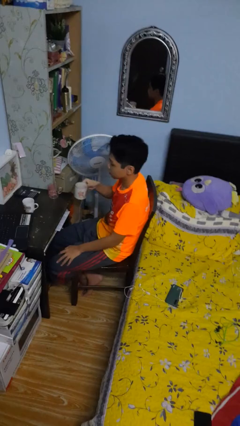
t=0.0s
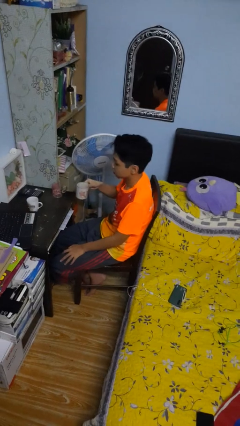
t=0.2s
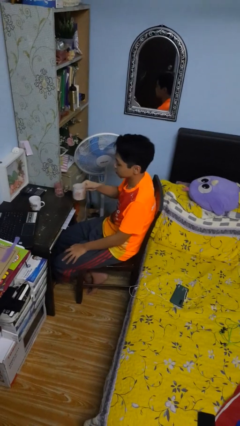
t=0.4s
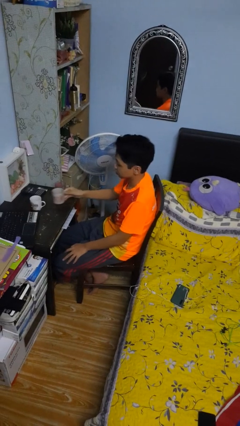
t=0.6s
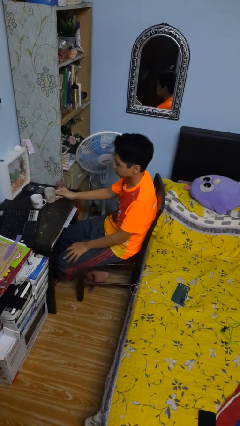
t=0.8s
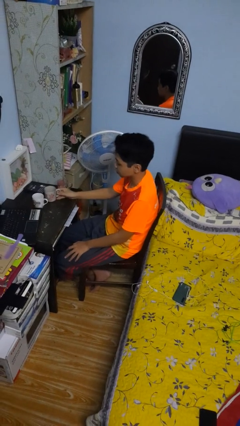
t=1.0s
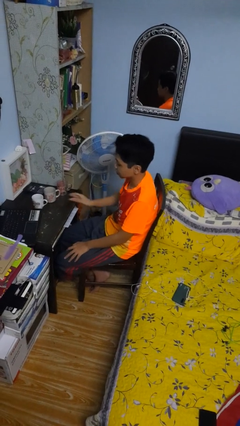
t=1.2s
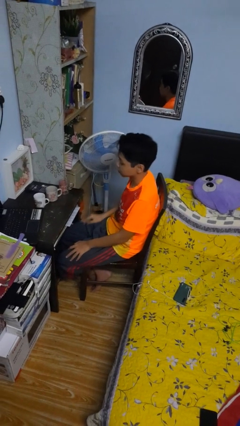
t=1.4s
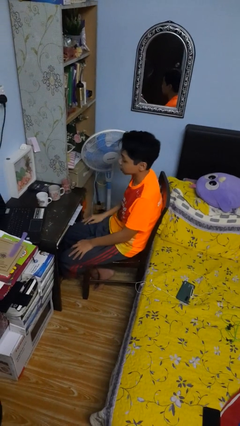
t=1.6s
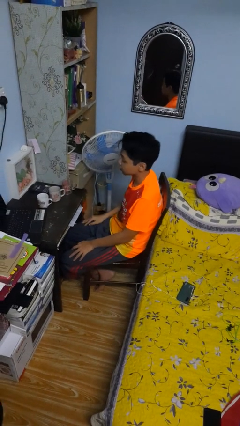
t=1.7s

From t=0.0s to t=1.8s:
person puts down object on table

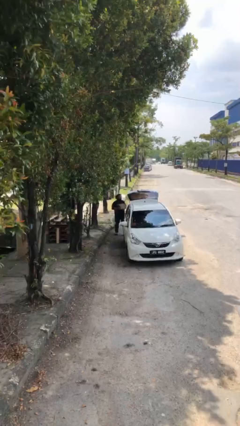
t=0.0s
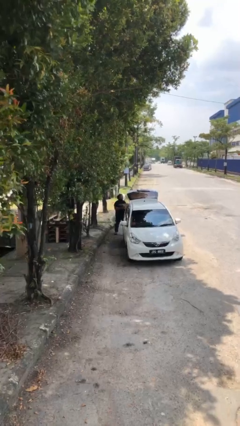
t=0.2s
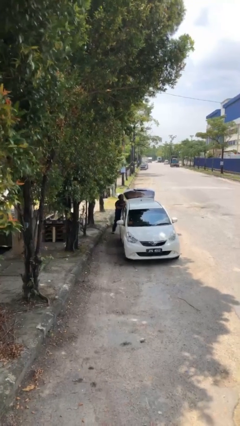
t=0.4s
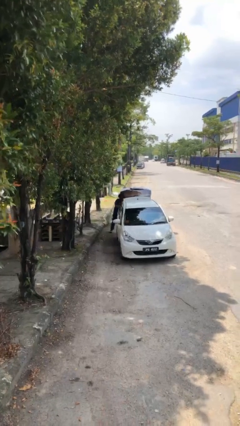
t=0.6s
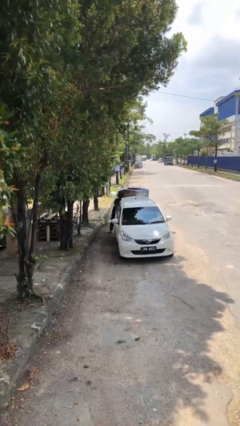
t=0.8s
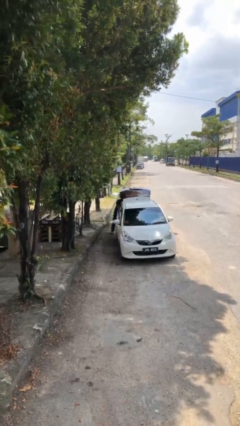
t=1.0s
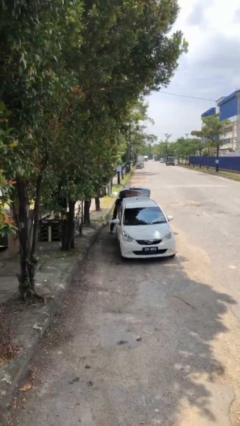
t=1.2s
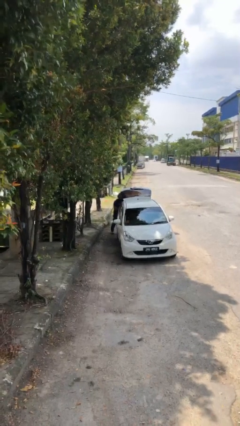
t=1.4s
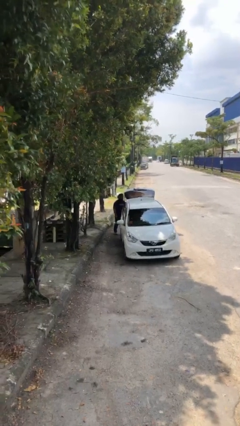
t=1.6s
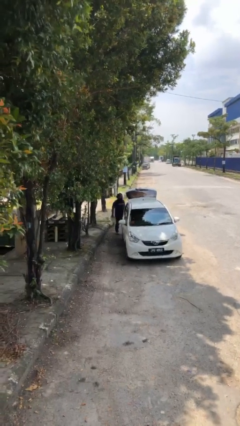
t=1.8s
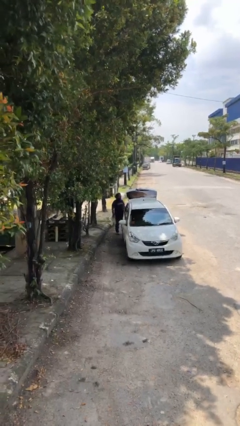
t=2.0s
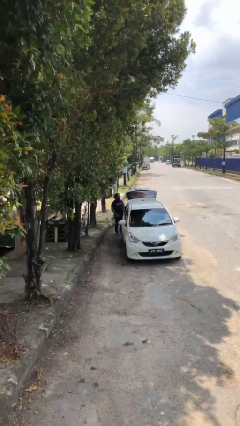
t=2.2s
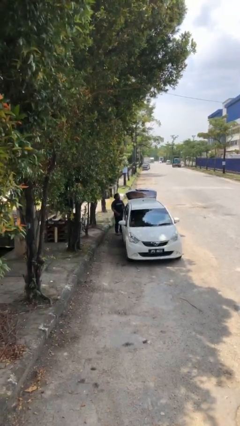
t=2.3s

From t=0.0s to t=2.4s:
person loads car

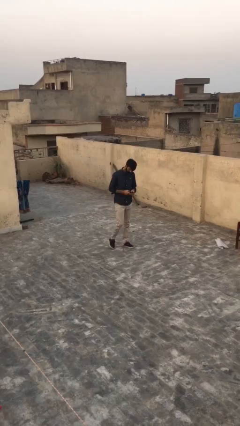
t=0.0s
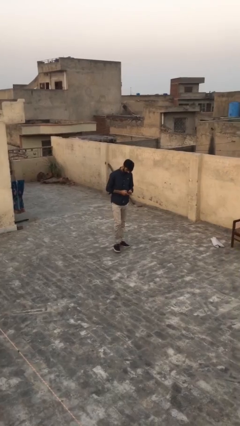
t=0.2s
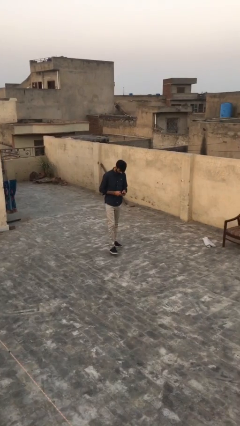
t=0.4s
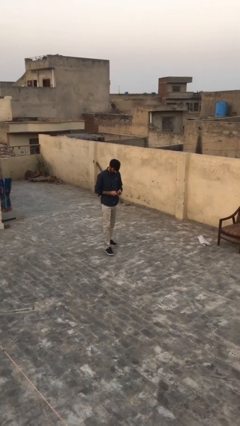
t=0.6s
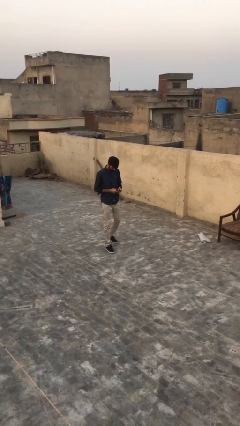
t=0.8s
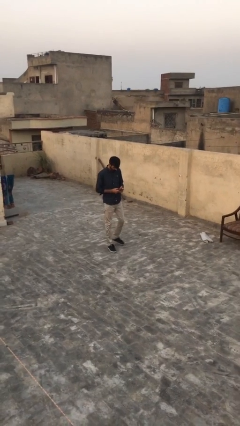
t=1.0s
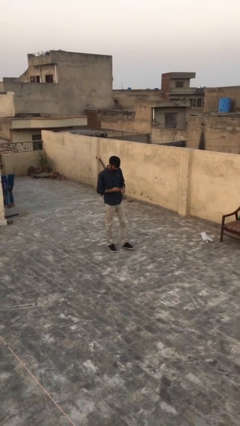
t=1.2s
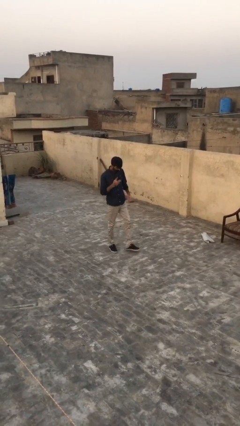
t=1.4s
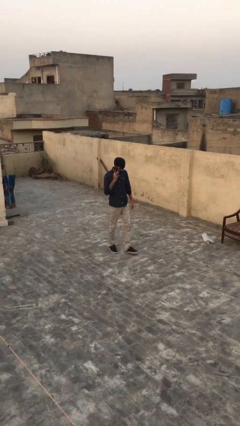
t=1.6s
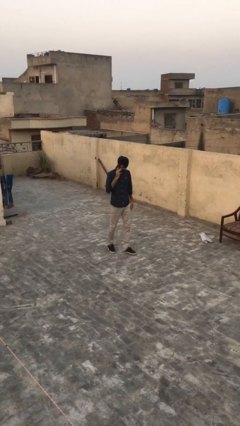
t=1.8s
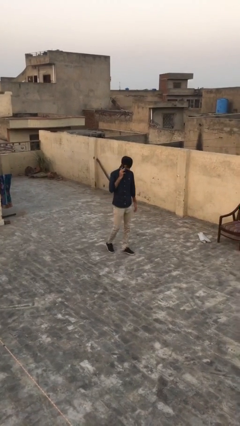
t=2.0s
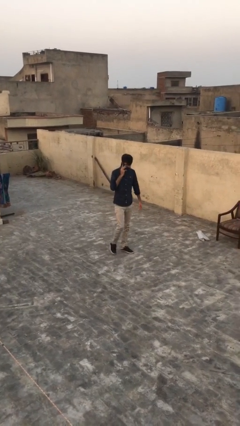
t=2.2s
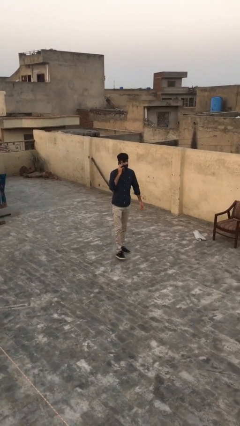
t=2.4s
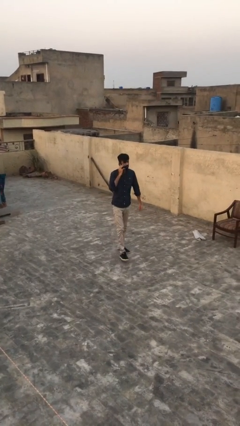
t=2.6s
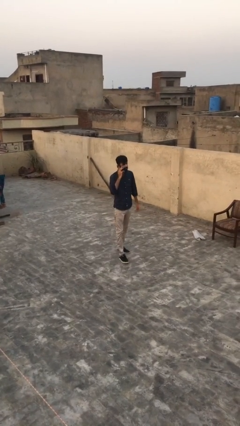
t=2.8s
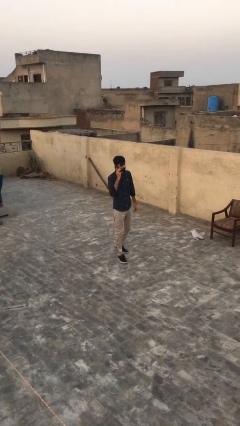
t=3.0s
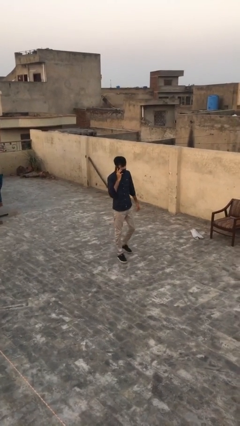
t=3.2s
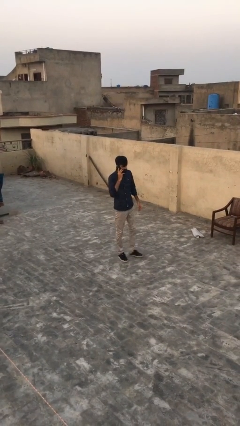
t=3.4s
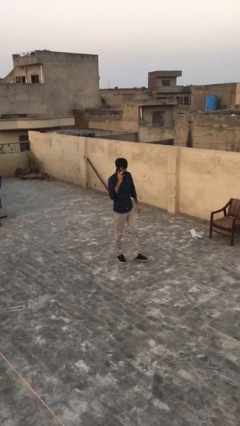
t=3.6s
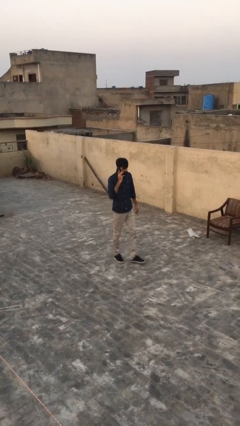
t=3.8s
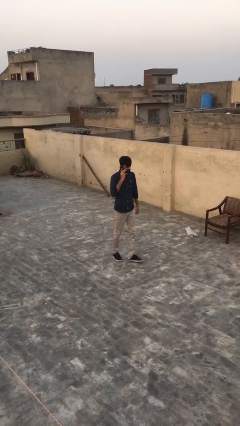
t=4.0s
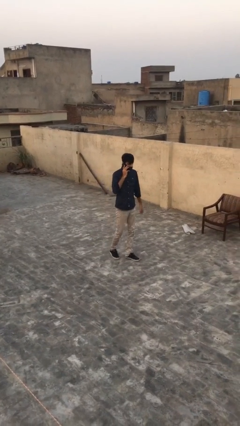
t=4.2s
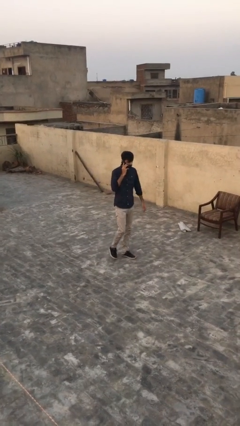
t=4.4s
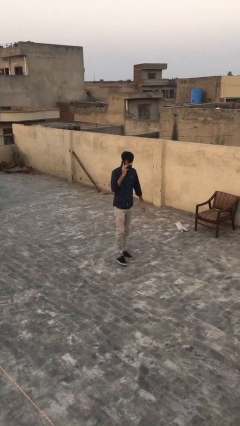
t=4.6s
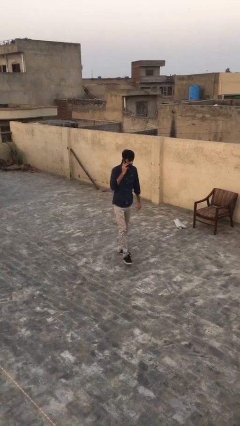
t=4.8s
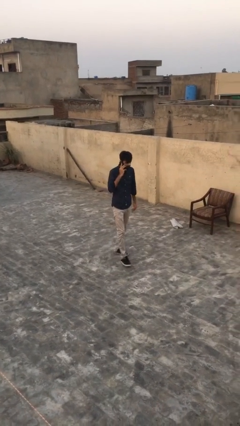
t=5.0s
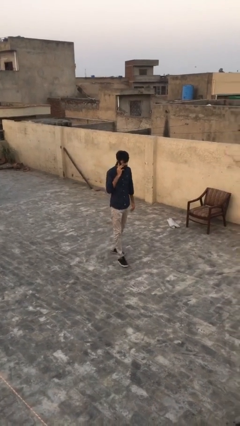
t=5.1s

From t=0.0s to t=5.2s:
person talks on phone

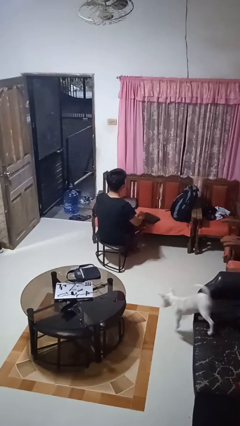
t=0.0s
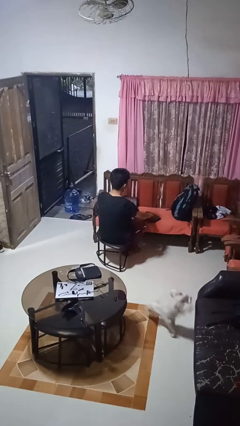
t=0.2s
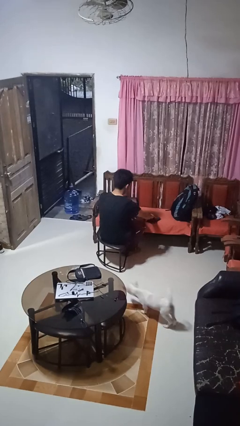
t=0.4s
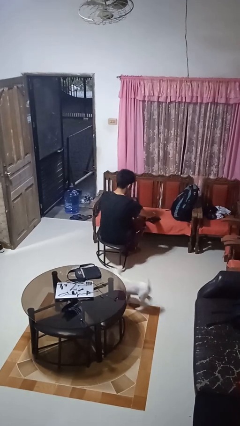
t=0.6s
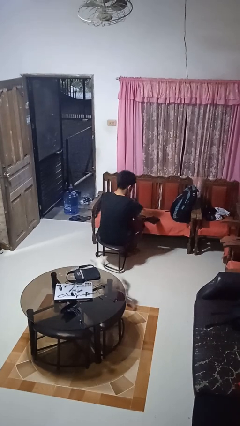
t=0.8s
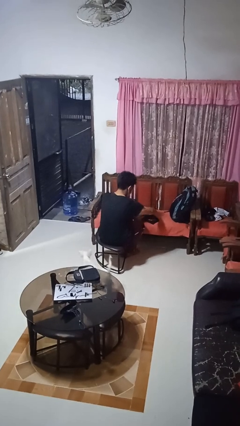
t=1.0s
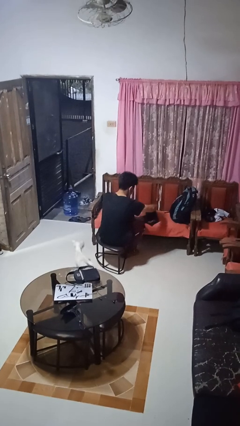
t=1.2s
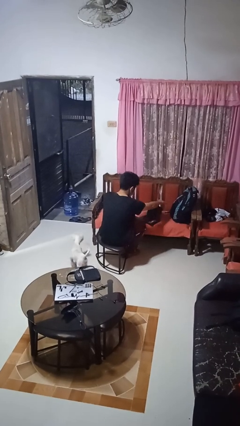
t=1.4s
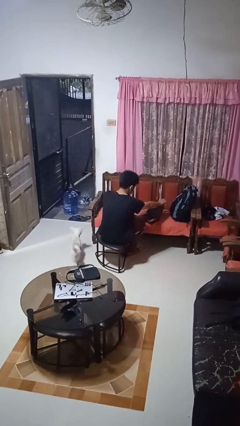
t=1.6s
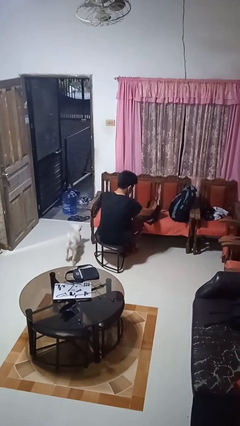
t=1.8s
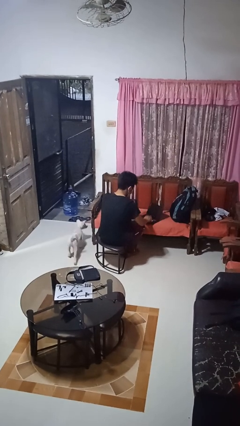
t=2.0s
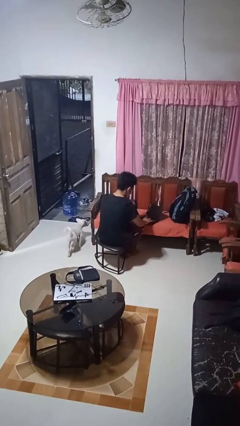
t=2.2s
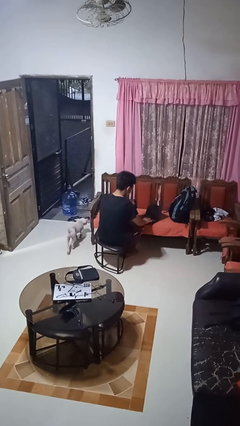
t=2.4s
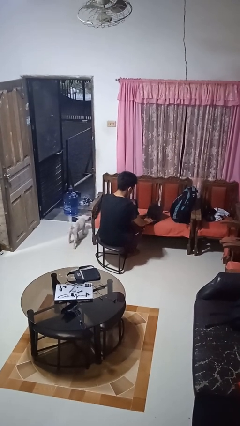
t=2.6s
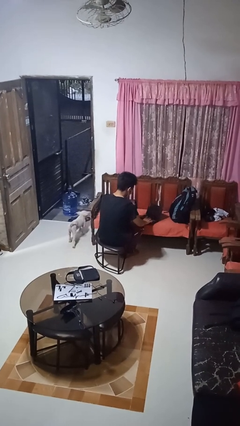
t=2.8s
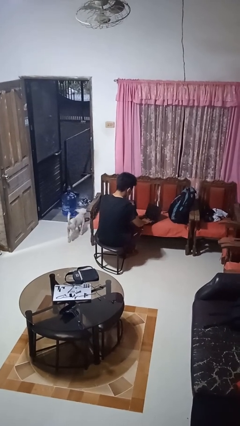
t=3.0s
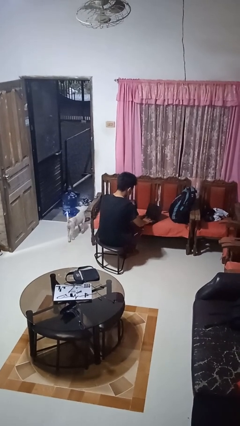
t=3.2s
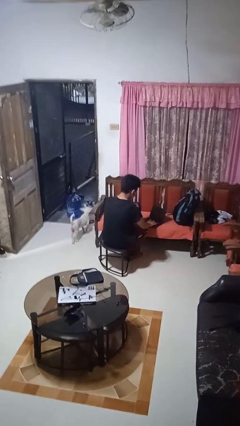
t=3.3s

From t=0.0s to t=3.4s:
person opens laptop

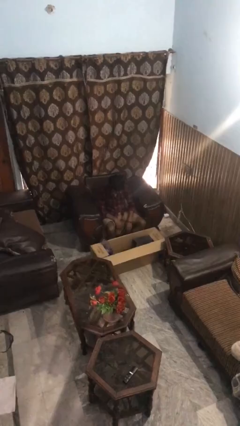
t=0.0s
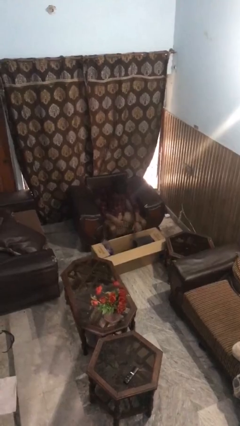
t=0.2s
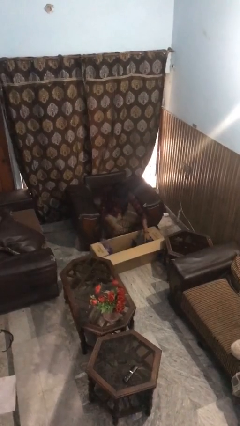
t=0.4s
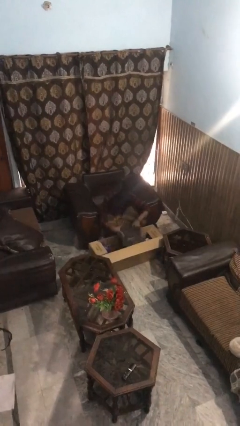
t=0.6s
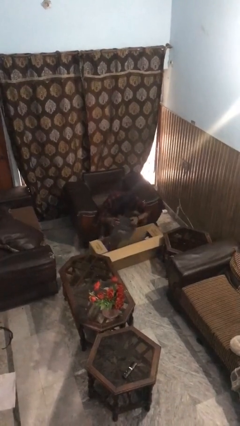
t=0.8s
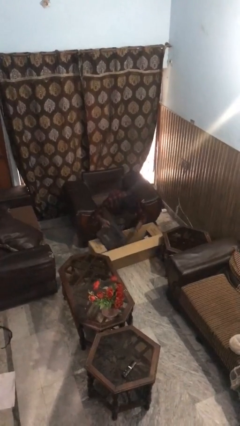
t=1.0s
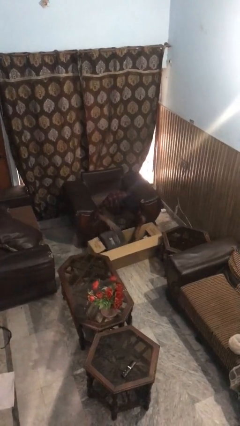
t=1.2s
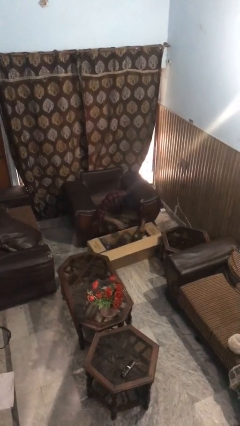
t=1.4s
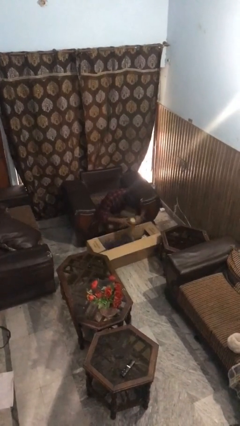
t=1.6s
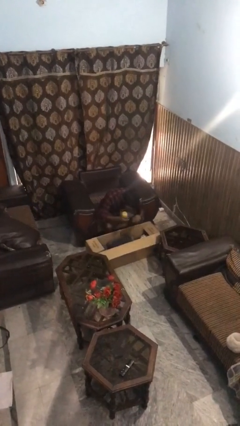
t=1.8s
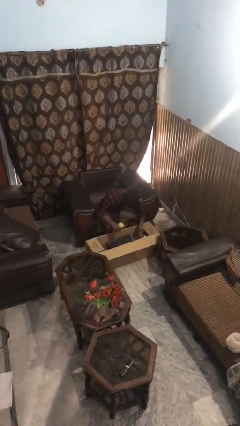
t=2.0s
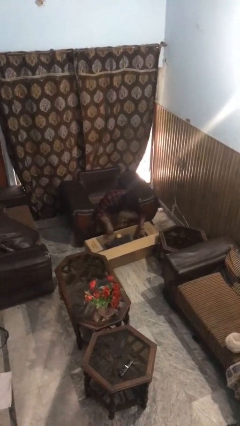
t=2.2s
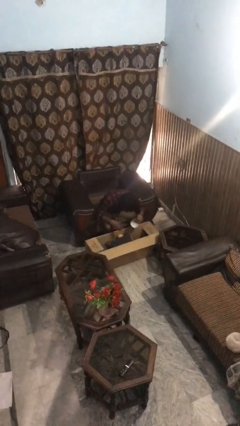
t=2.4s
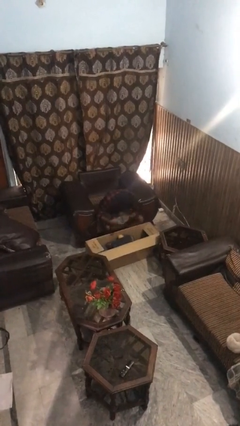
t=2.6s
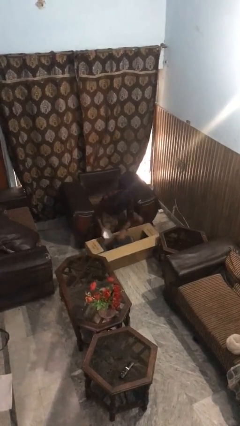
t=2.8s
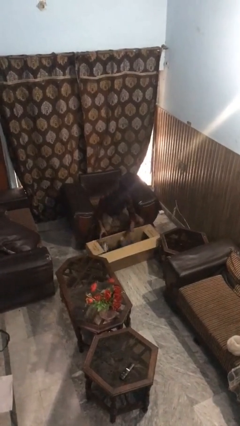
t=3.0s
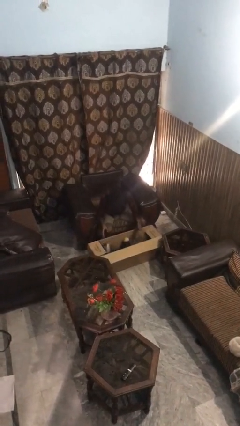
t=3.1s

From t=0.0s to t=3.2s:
person searches in box

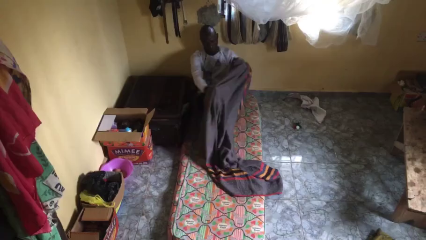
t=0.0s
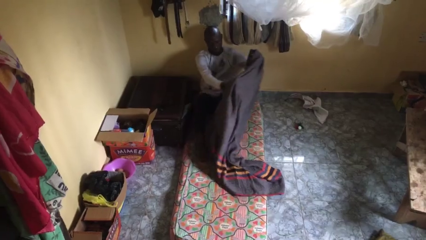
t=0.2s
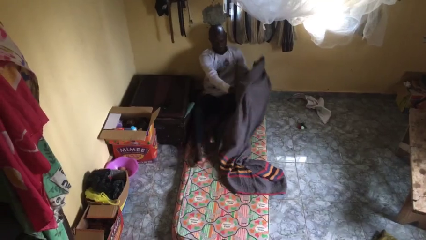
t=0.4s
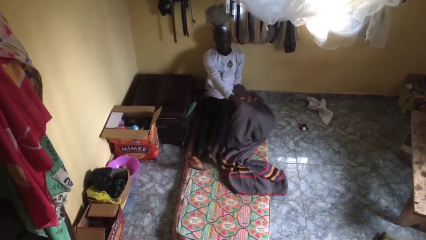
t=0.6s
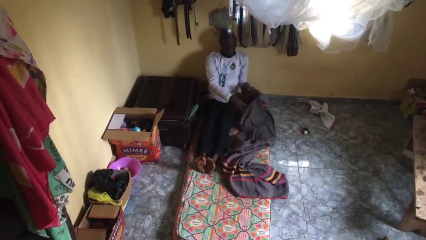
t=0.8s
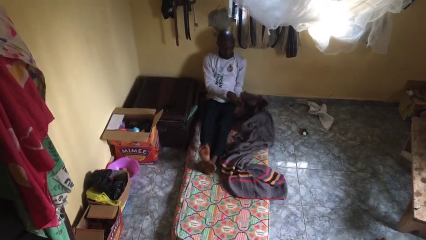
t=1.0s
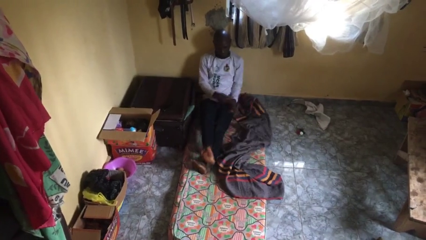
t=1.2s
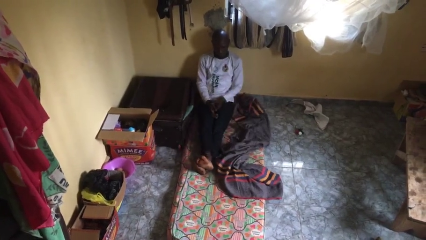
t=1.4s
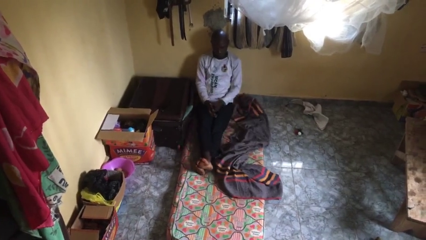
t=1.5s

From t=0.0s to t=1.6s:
person uncovers with blanket
